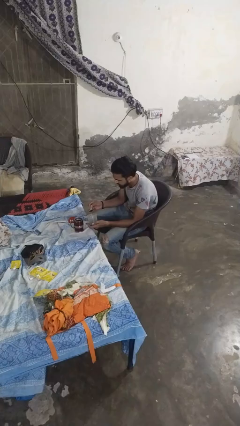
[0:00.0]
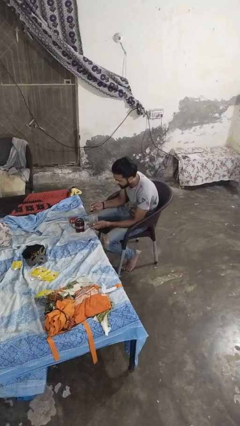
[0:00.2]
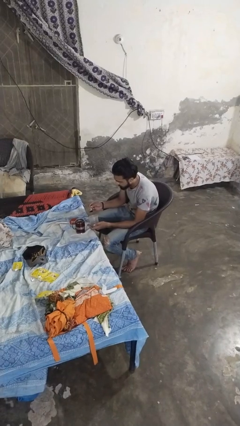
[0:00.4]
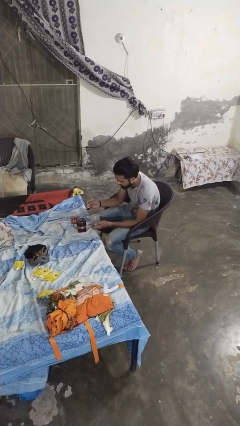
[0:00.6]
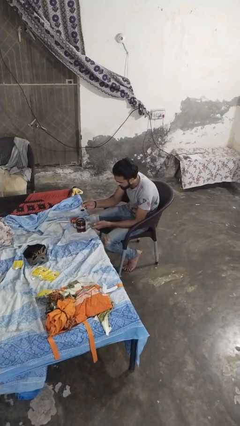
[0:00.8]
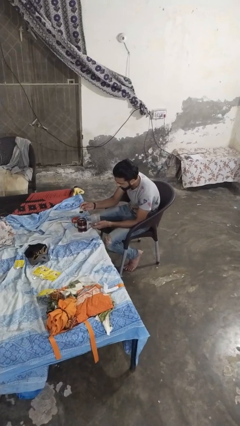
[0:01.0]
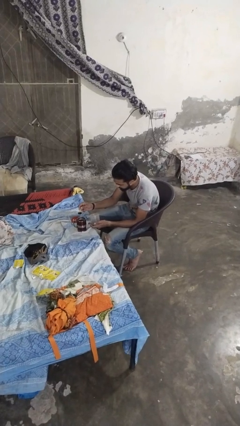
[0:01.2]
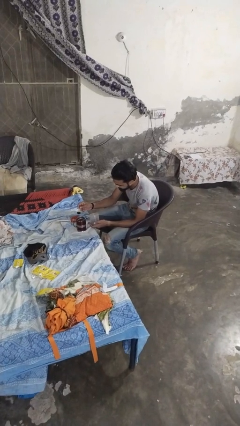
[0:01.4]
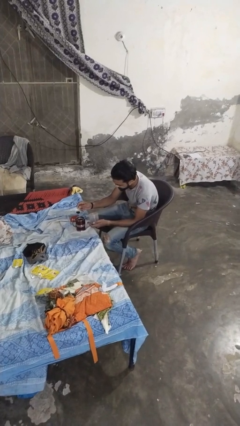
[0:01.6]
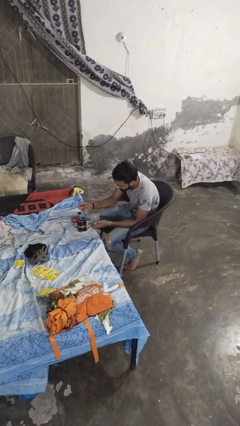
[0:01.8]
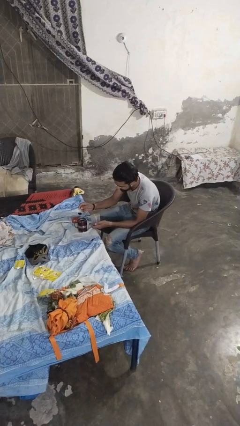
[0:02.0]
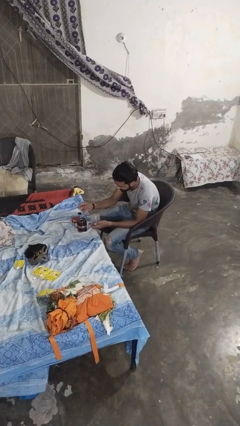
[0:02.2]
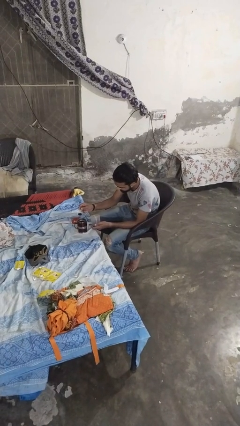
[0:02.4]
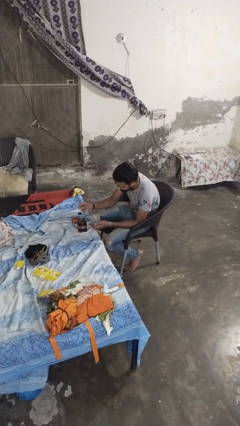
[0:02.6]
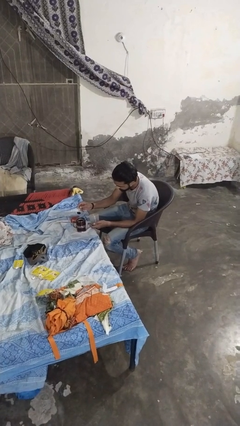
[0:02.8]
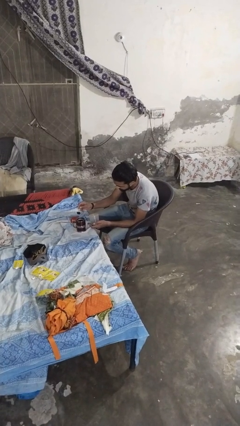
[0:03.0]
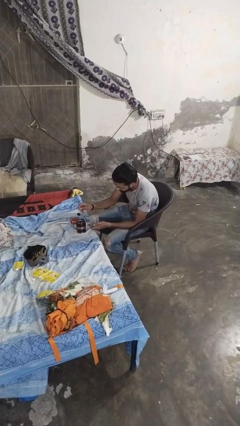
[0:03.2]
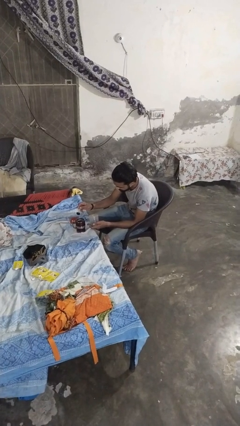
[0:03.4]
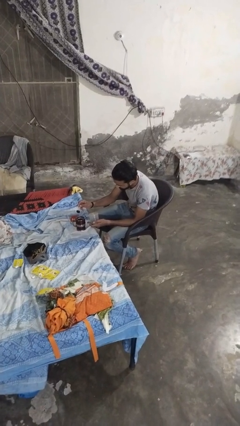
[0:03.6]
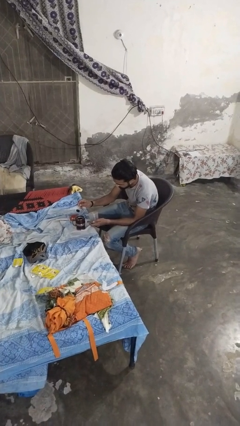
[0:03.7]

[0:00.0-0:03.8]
person pours coffee into mug

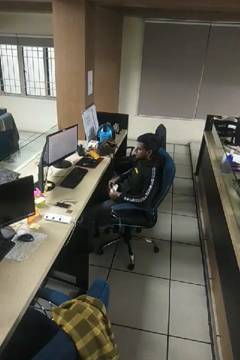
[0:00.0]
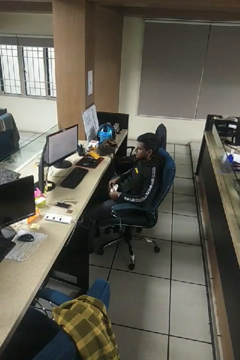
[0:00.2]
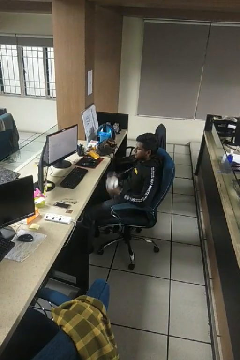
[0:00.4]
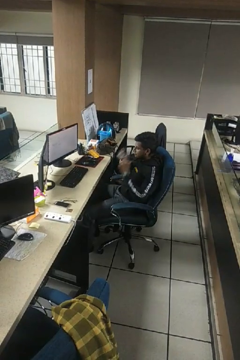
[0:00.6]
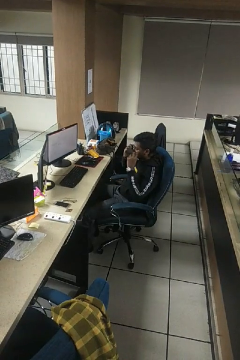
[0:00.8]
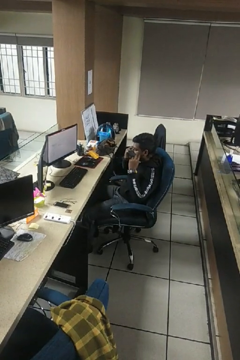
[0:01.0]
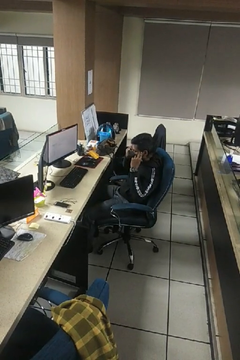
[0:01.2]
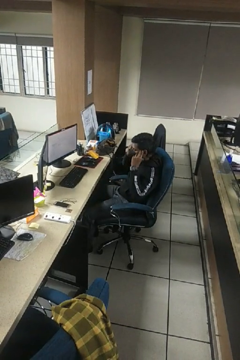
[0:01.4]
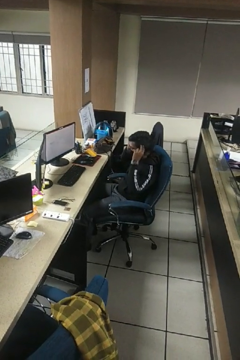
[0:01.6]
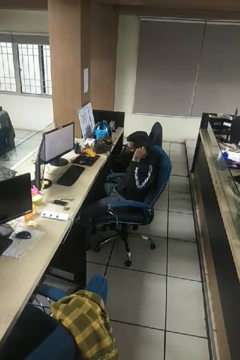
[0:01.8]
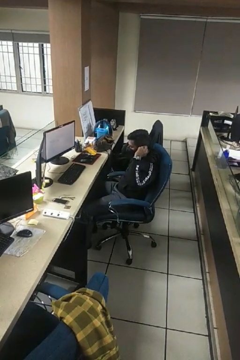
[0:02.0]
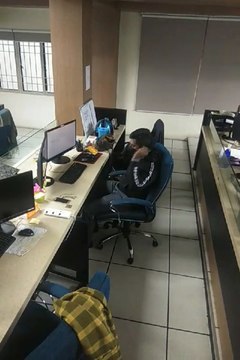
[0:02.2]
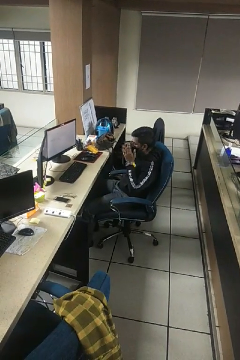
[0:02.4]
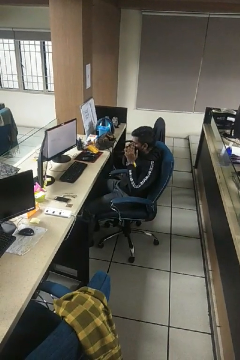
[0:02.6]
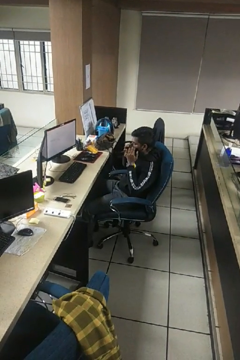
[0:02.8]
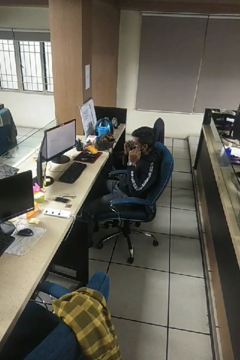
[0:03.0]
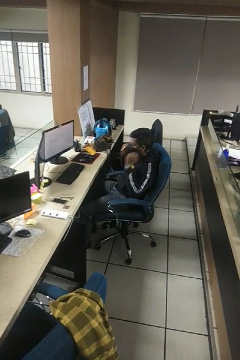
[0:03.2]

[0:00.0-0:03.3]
person puts on facemask

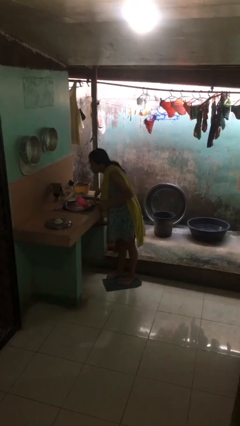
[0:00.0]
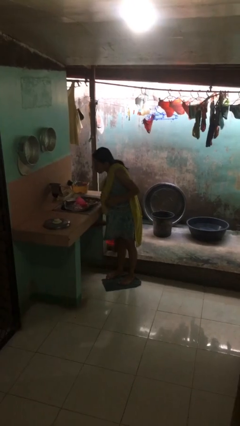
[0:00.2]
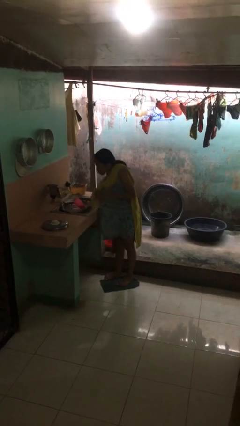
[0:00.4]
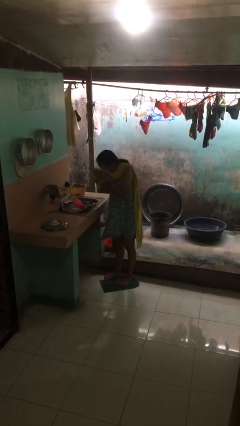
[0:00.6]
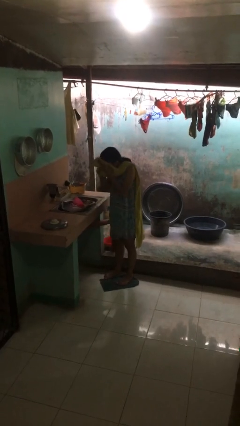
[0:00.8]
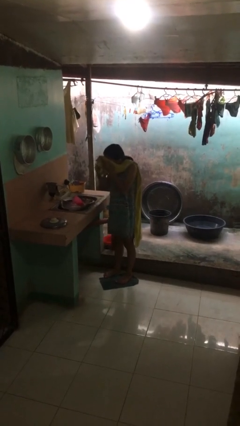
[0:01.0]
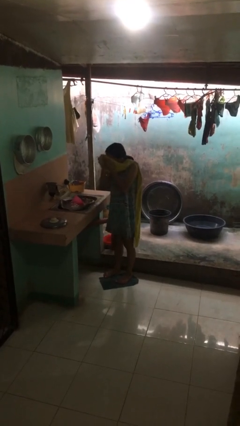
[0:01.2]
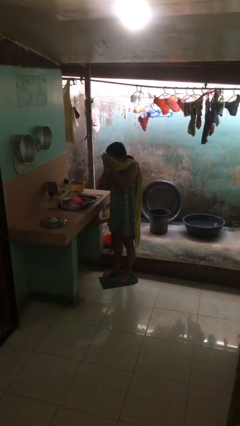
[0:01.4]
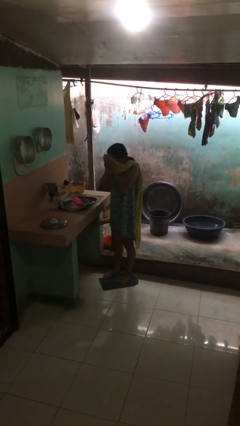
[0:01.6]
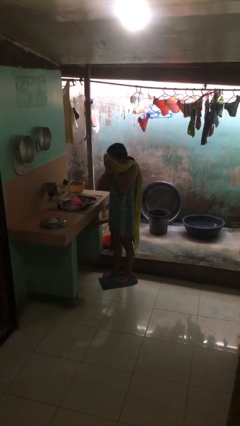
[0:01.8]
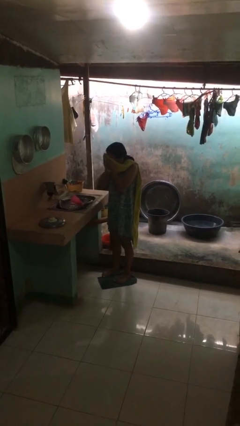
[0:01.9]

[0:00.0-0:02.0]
person dries face with towel

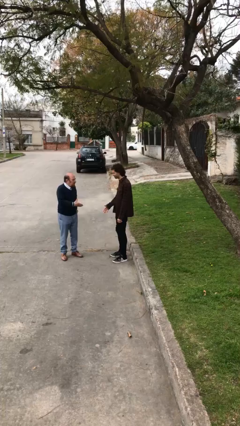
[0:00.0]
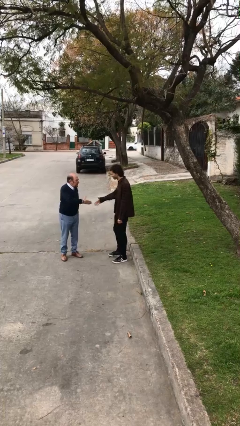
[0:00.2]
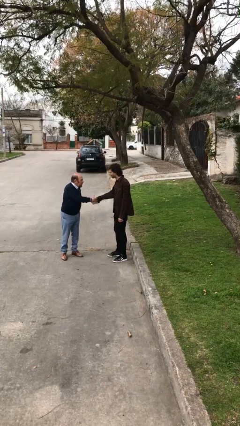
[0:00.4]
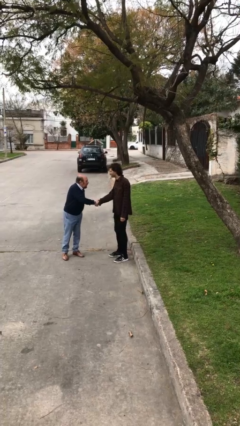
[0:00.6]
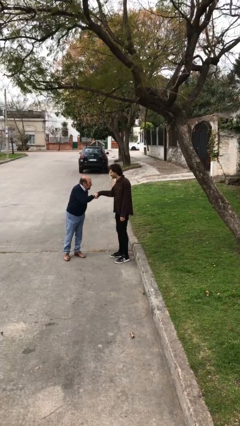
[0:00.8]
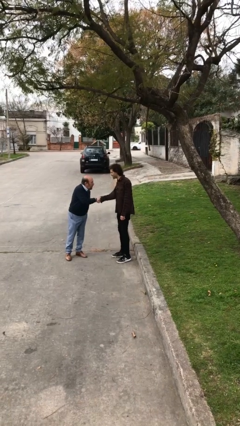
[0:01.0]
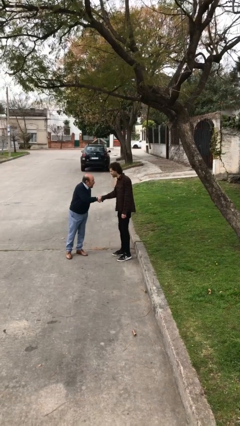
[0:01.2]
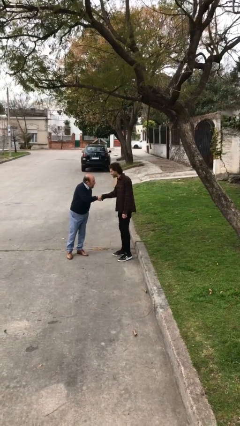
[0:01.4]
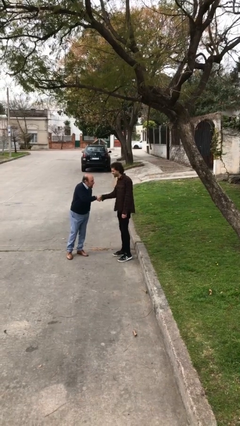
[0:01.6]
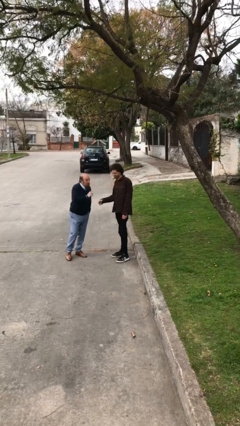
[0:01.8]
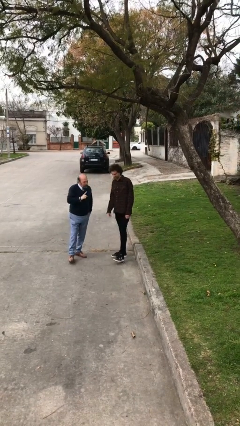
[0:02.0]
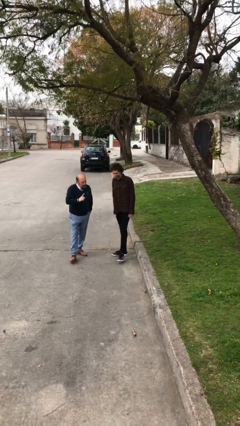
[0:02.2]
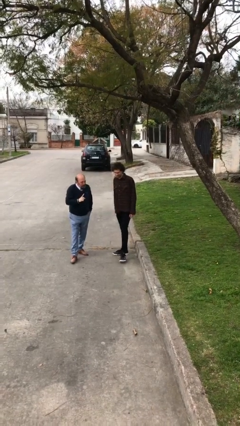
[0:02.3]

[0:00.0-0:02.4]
person shakes hand

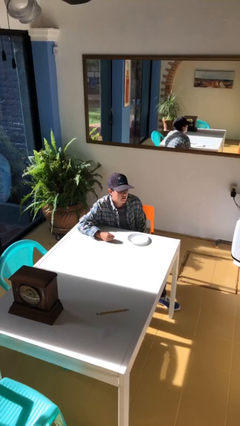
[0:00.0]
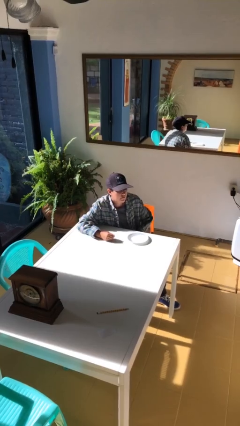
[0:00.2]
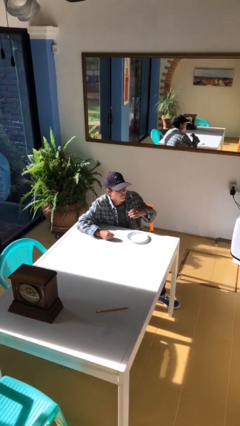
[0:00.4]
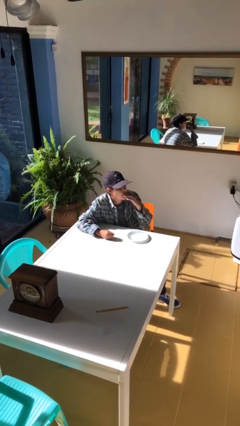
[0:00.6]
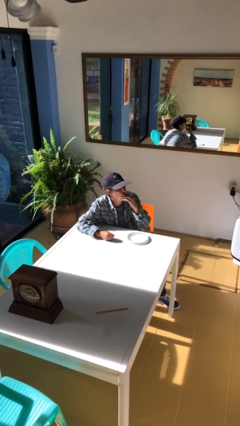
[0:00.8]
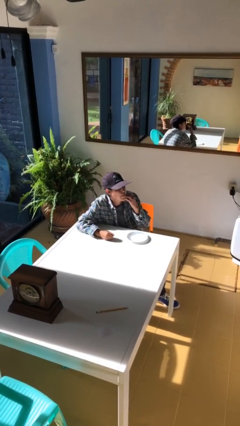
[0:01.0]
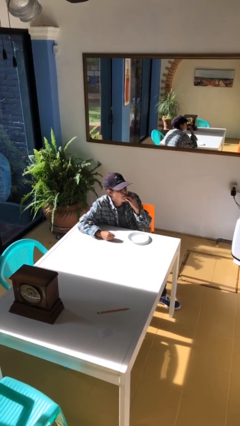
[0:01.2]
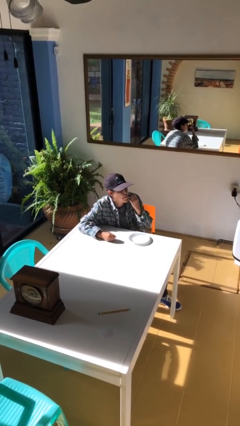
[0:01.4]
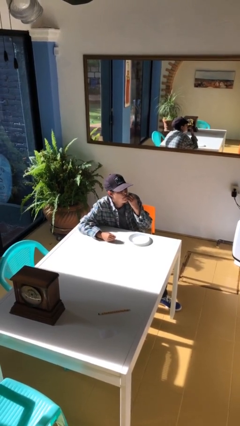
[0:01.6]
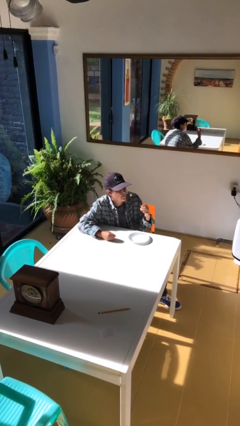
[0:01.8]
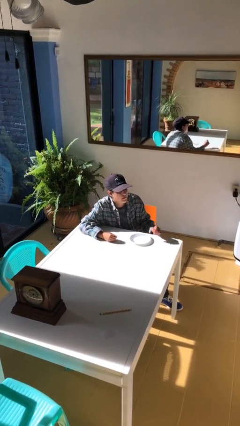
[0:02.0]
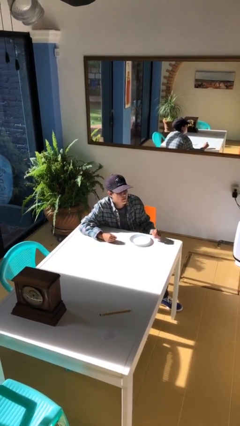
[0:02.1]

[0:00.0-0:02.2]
person licks fingers

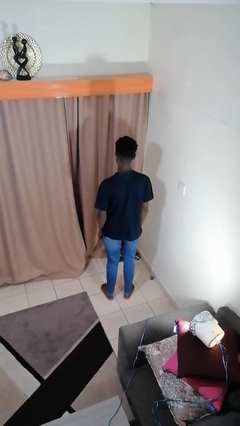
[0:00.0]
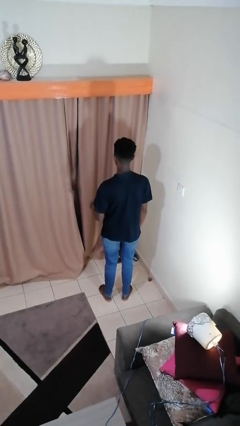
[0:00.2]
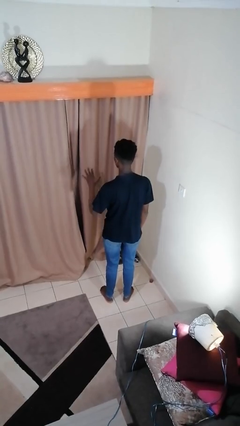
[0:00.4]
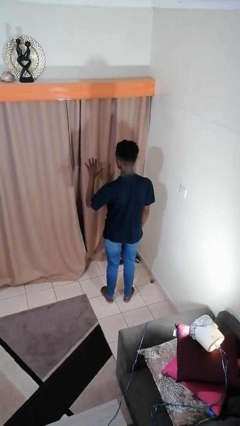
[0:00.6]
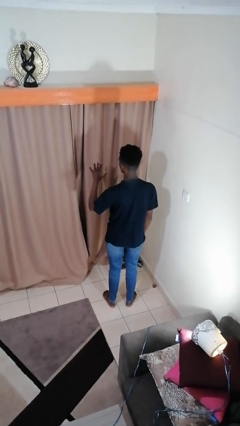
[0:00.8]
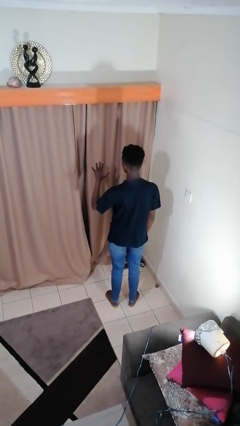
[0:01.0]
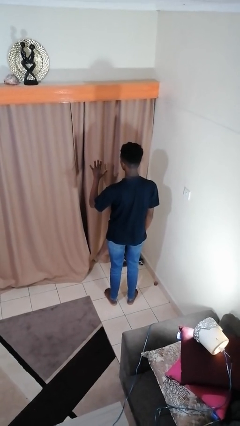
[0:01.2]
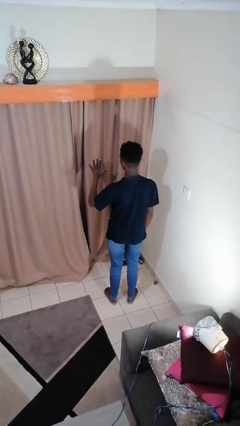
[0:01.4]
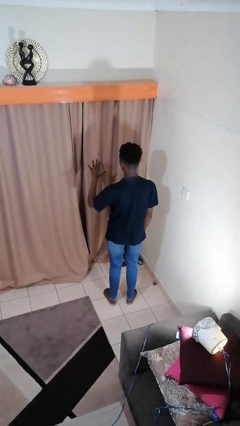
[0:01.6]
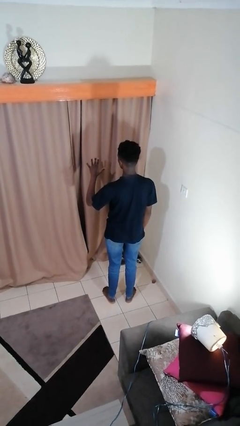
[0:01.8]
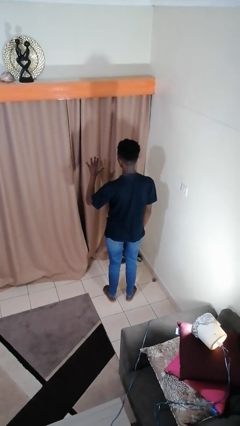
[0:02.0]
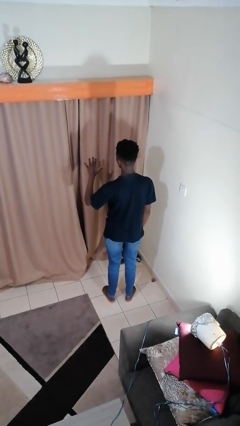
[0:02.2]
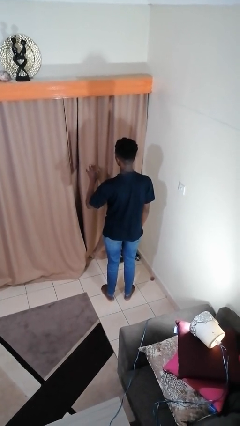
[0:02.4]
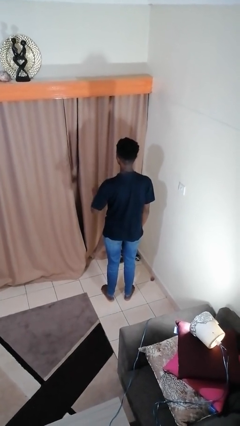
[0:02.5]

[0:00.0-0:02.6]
person gestures number five

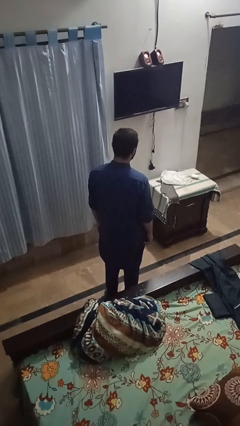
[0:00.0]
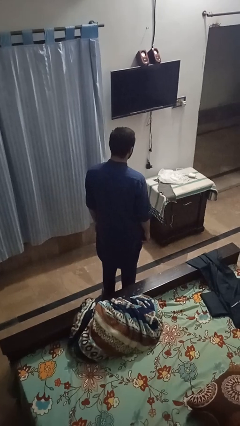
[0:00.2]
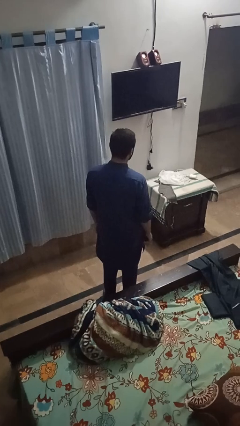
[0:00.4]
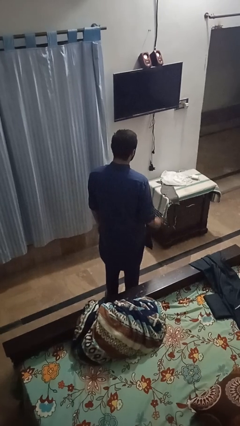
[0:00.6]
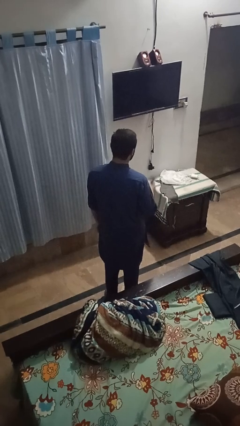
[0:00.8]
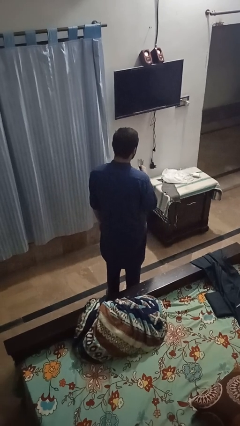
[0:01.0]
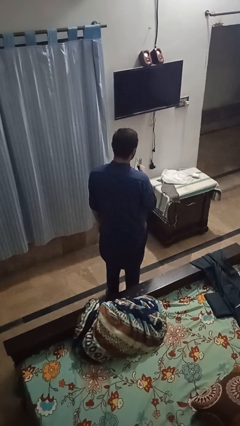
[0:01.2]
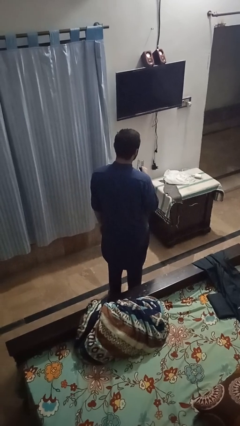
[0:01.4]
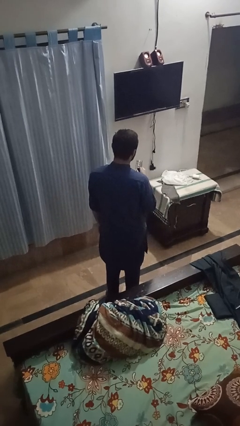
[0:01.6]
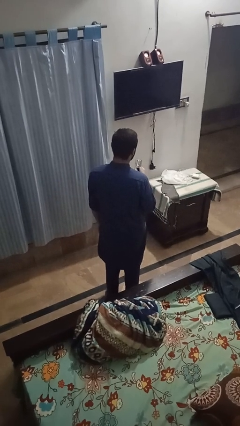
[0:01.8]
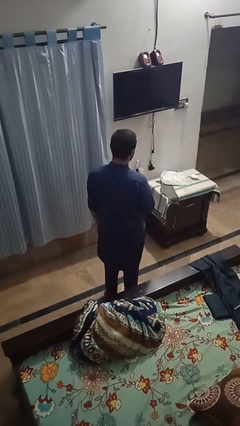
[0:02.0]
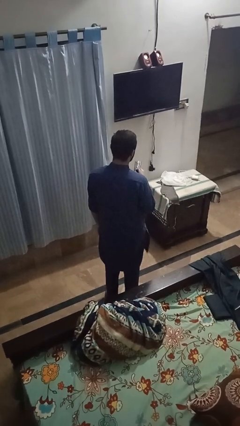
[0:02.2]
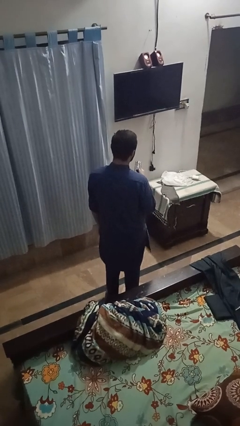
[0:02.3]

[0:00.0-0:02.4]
person uses television remote
